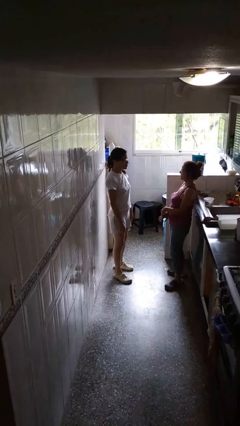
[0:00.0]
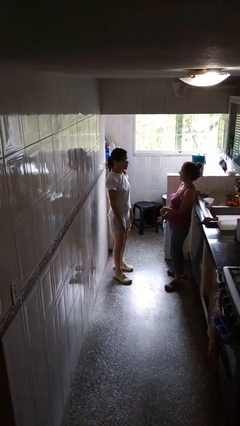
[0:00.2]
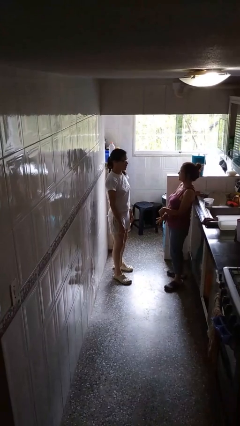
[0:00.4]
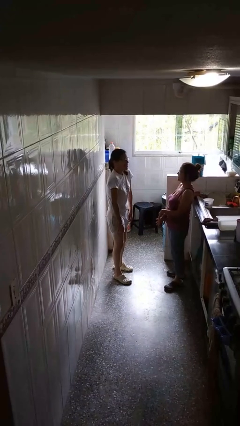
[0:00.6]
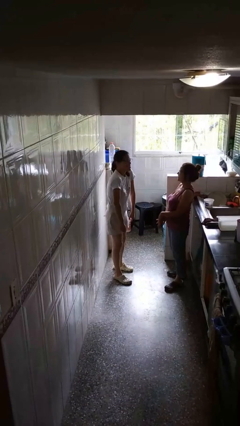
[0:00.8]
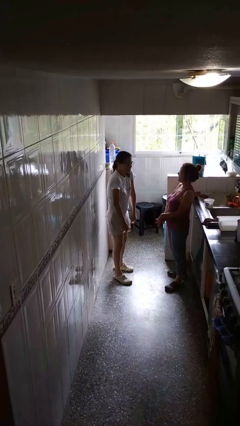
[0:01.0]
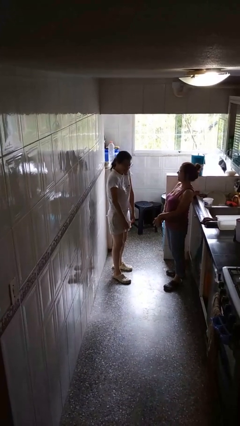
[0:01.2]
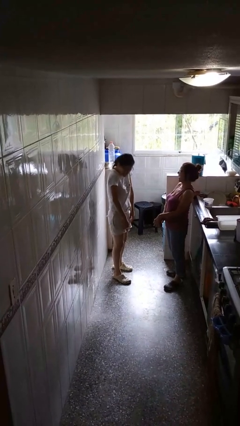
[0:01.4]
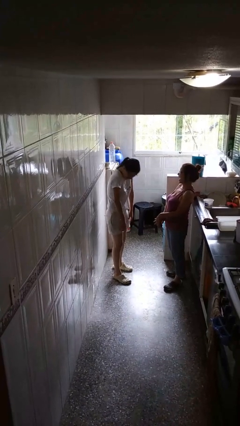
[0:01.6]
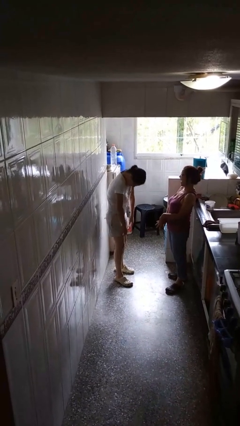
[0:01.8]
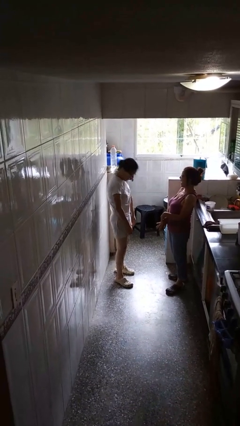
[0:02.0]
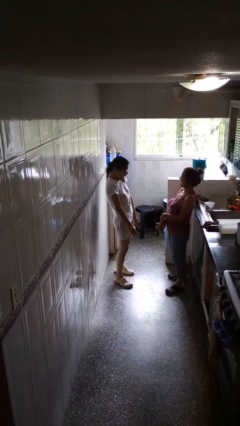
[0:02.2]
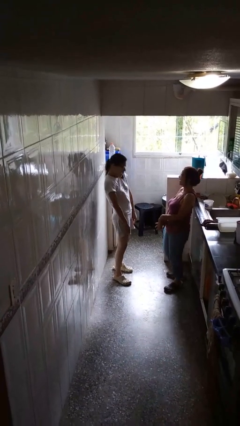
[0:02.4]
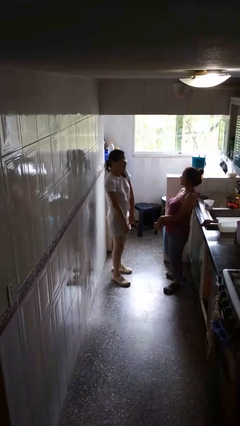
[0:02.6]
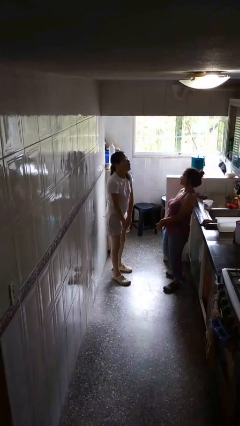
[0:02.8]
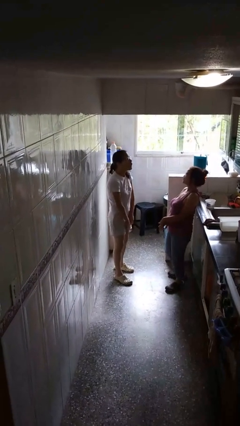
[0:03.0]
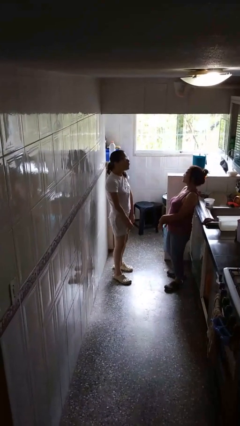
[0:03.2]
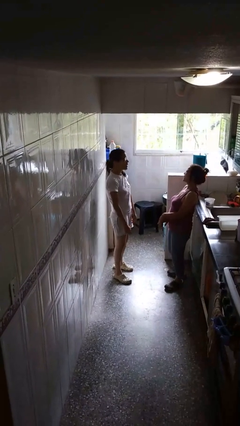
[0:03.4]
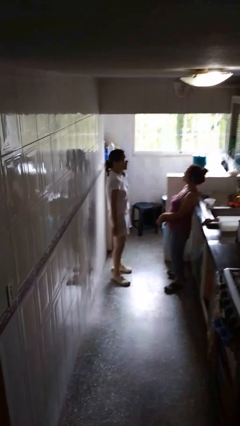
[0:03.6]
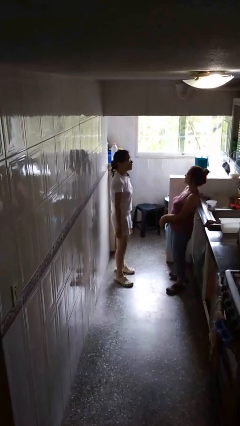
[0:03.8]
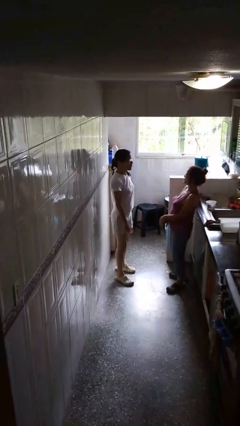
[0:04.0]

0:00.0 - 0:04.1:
person laughs with person

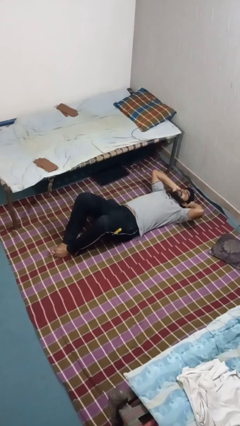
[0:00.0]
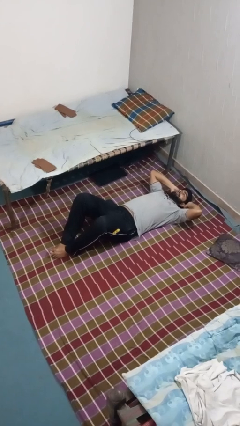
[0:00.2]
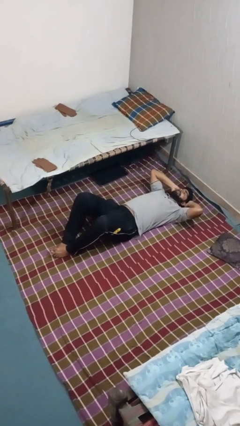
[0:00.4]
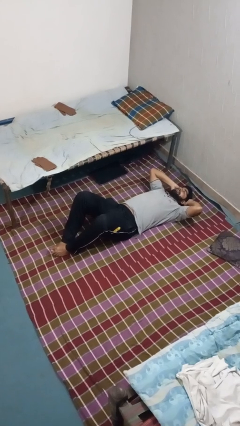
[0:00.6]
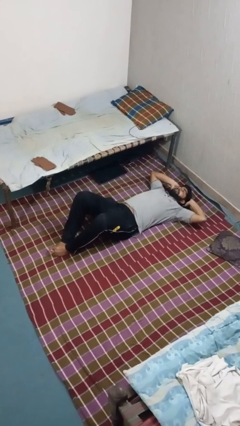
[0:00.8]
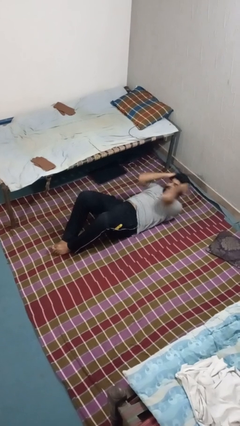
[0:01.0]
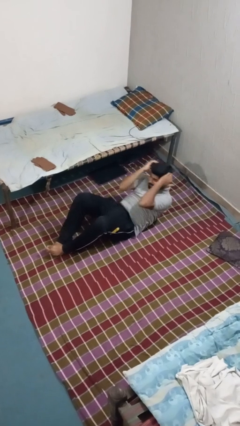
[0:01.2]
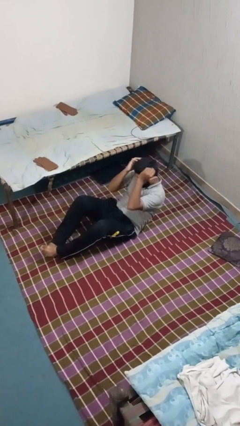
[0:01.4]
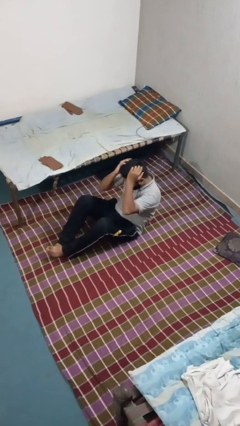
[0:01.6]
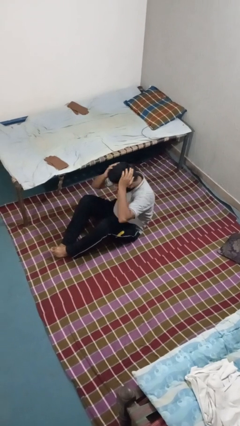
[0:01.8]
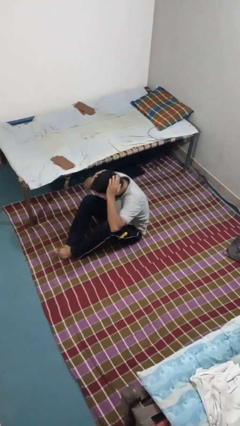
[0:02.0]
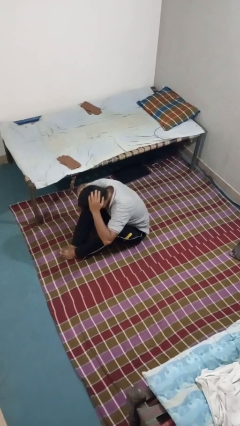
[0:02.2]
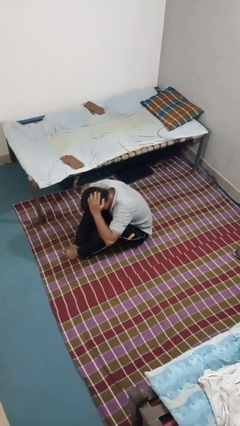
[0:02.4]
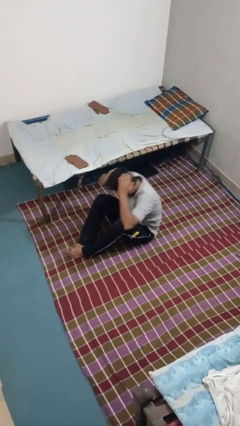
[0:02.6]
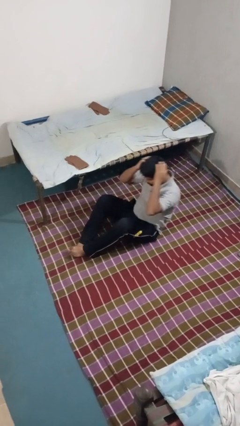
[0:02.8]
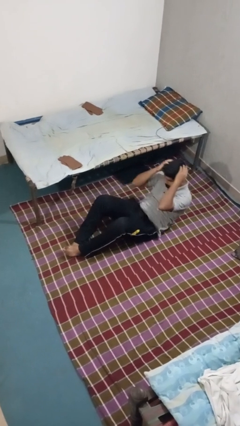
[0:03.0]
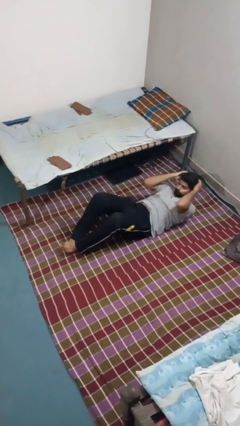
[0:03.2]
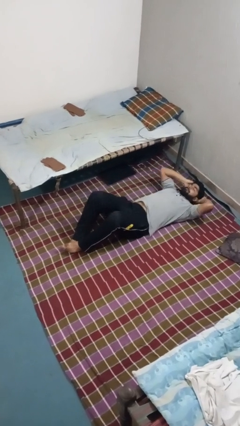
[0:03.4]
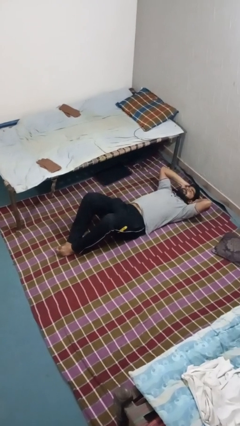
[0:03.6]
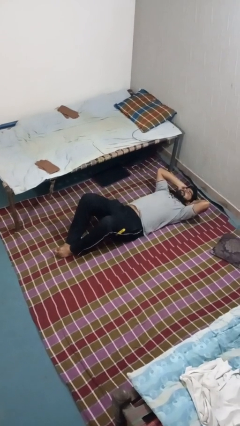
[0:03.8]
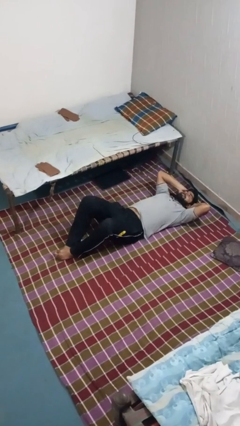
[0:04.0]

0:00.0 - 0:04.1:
person exercises with situp

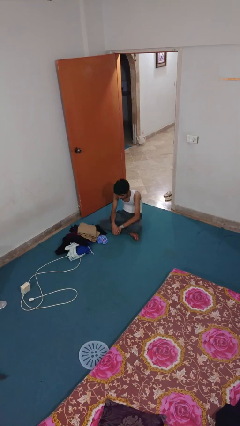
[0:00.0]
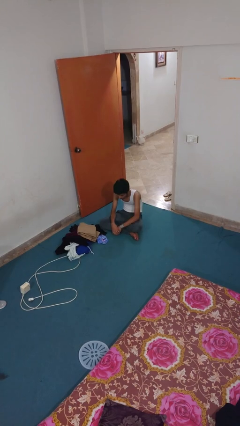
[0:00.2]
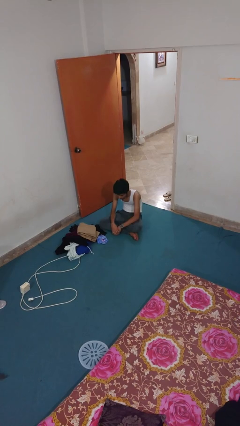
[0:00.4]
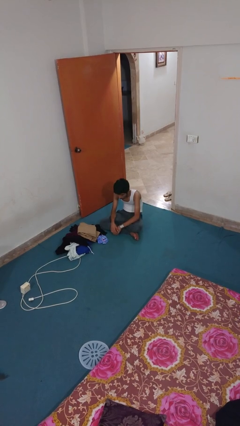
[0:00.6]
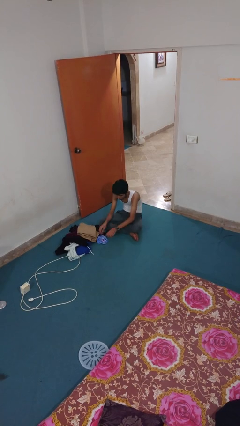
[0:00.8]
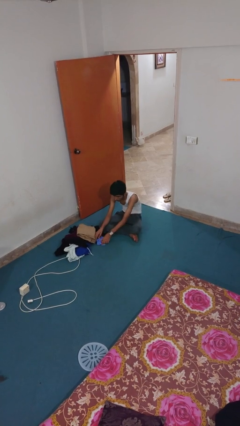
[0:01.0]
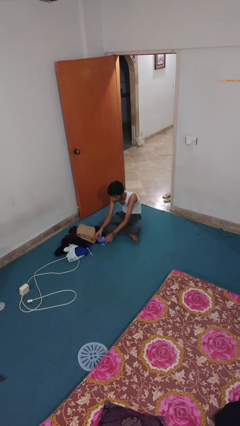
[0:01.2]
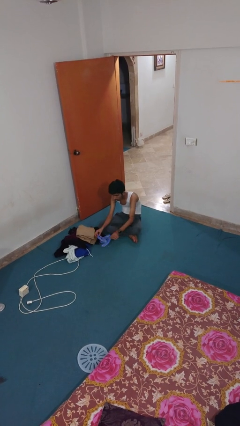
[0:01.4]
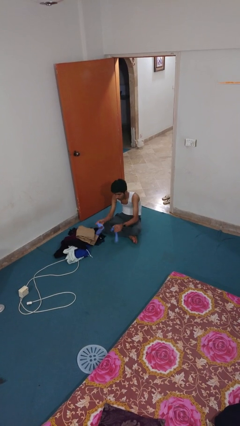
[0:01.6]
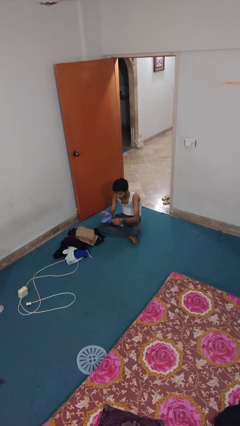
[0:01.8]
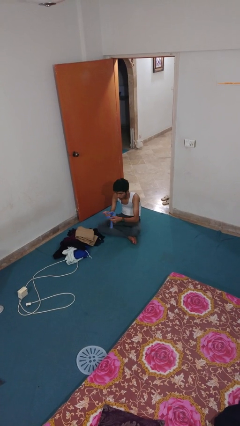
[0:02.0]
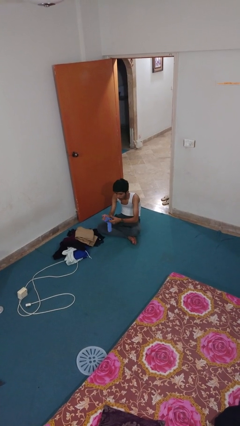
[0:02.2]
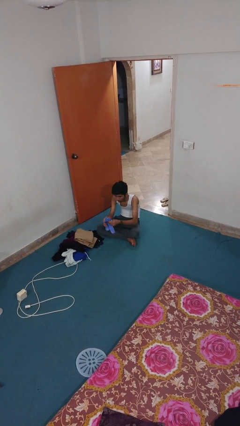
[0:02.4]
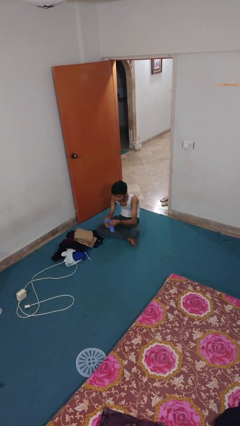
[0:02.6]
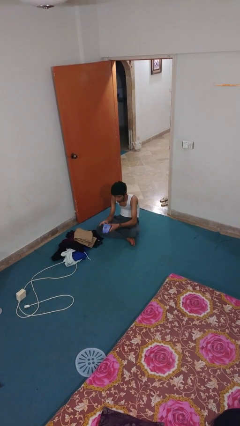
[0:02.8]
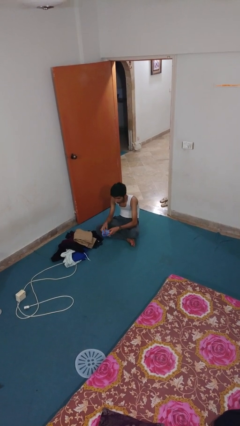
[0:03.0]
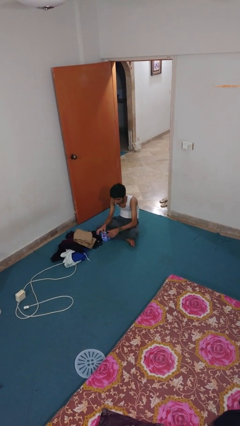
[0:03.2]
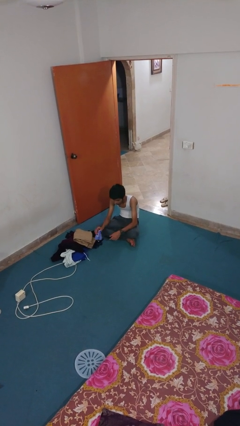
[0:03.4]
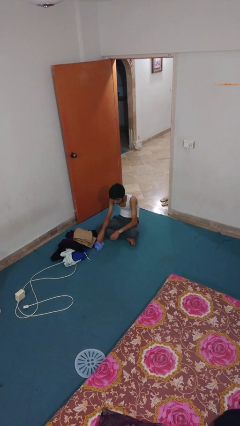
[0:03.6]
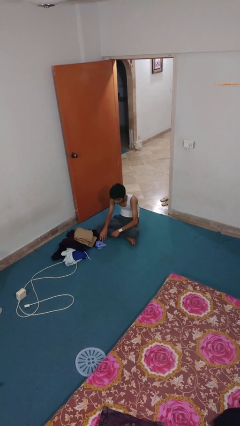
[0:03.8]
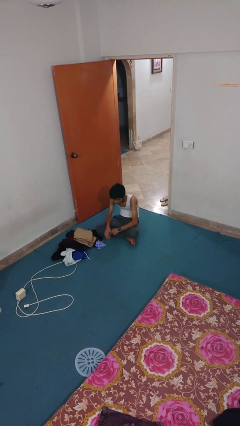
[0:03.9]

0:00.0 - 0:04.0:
person folds socks

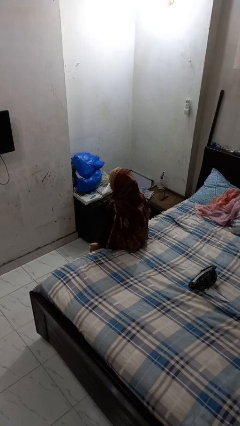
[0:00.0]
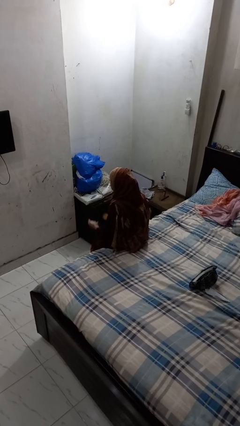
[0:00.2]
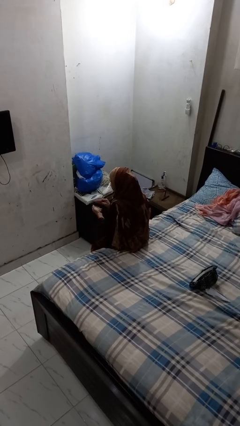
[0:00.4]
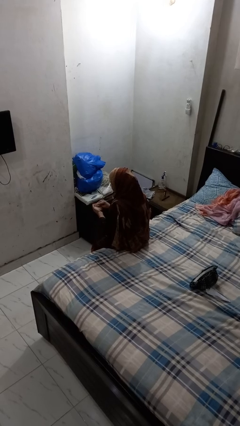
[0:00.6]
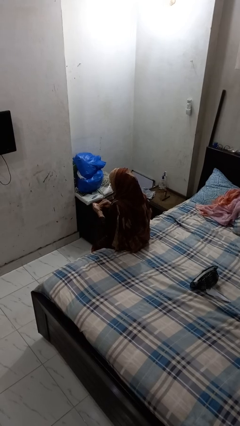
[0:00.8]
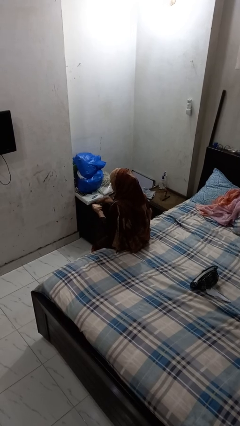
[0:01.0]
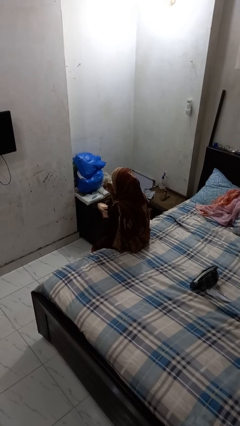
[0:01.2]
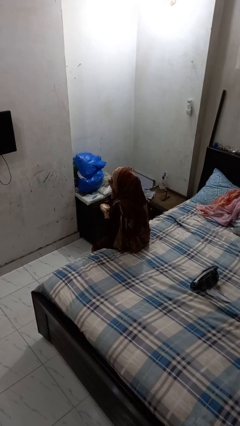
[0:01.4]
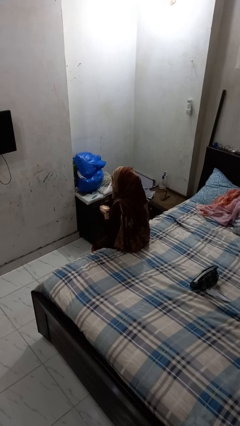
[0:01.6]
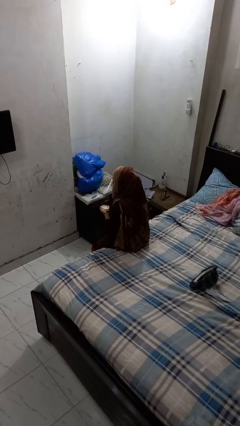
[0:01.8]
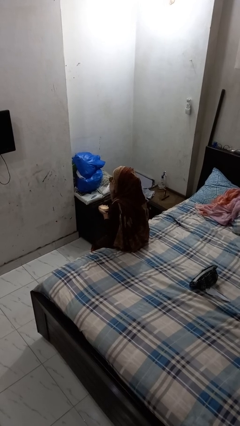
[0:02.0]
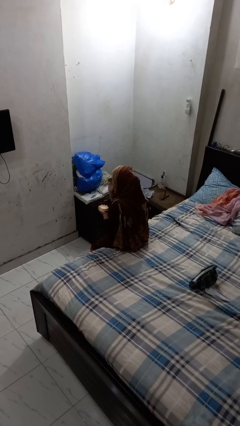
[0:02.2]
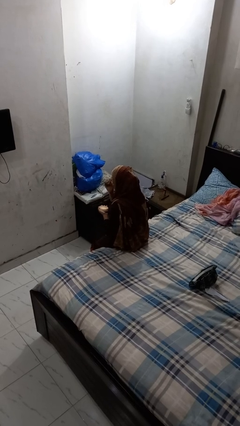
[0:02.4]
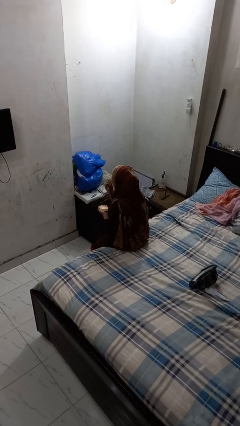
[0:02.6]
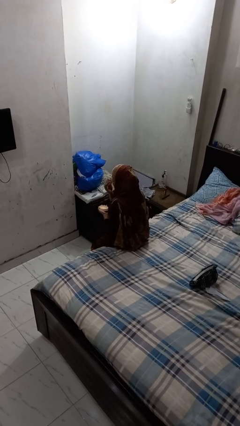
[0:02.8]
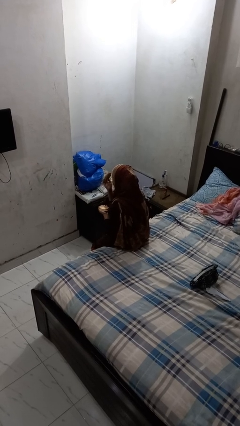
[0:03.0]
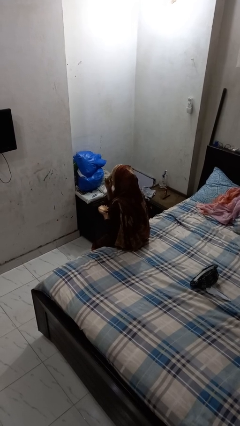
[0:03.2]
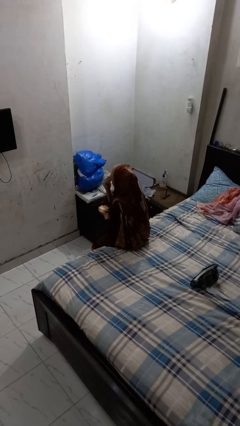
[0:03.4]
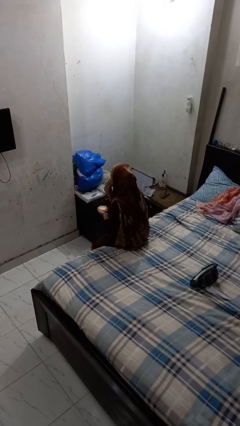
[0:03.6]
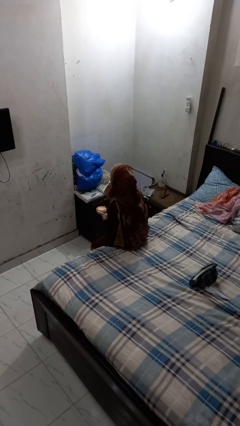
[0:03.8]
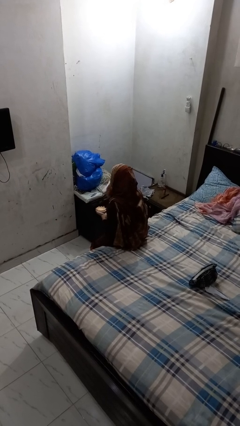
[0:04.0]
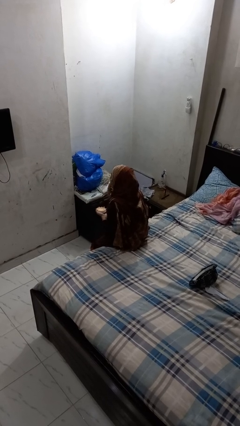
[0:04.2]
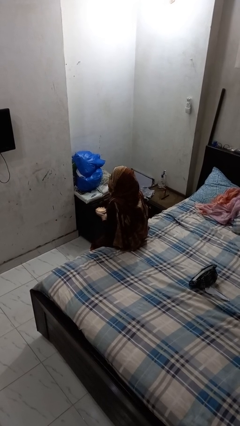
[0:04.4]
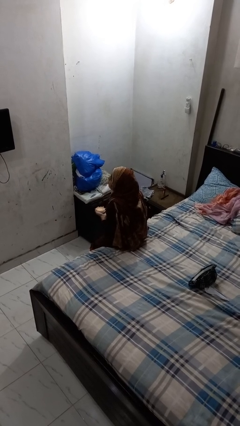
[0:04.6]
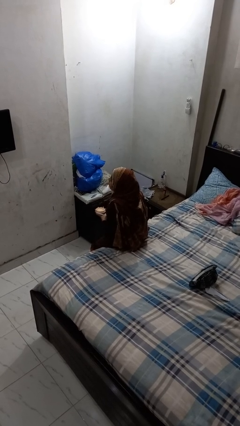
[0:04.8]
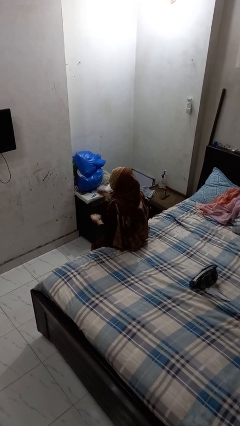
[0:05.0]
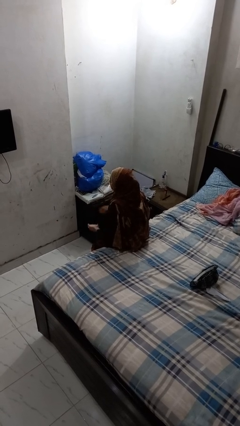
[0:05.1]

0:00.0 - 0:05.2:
person applies foundation makeup

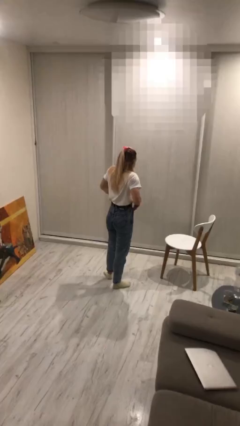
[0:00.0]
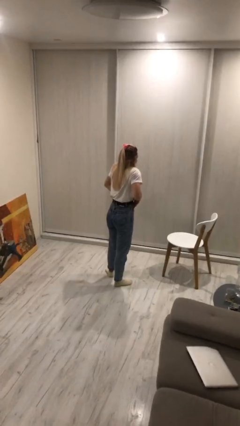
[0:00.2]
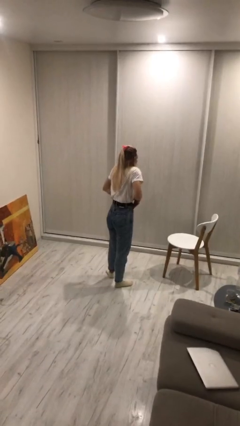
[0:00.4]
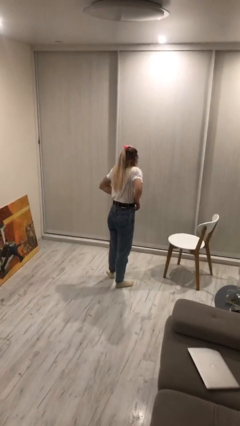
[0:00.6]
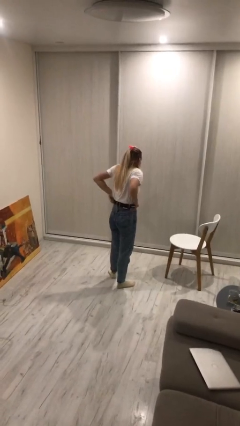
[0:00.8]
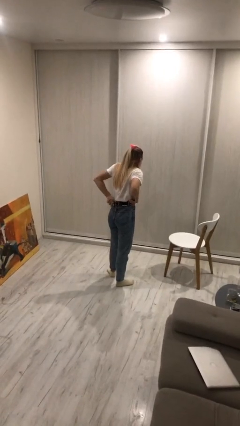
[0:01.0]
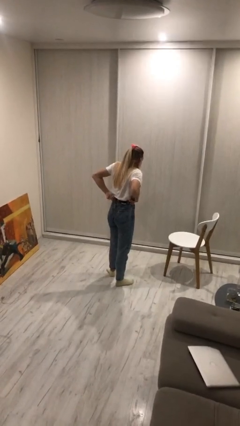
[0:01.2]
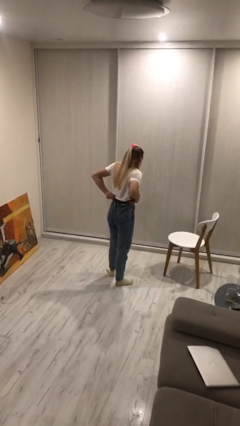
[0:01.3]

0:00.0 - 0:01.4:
person hikes up pants
